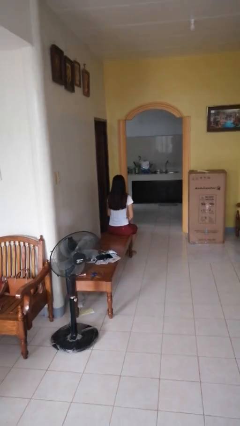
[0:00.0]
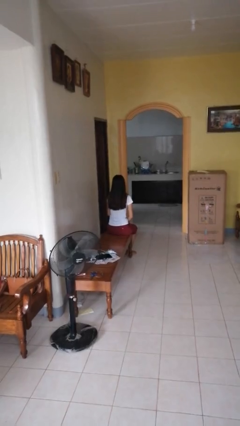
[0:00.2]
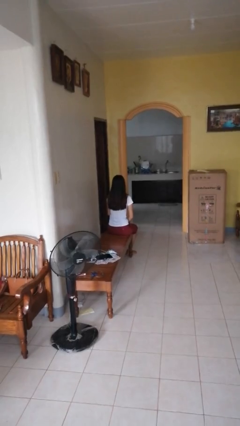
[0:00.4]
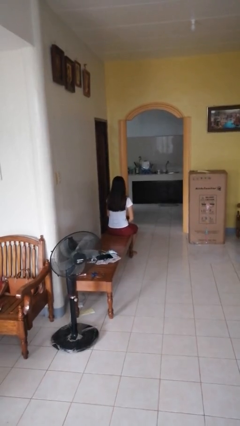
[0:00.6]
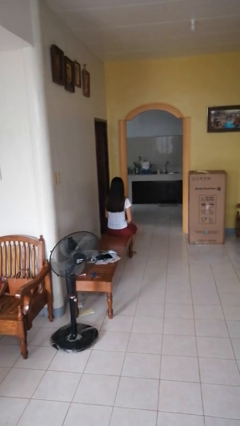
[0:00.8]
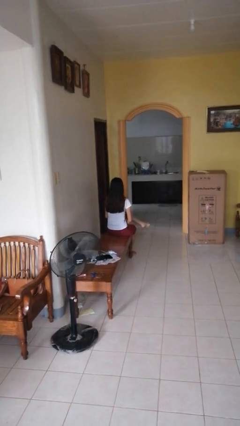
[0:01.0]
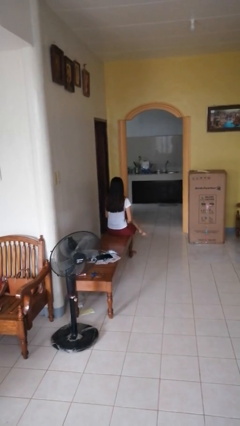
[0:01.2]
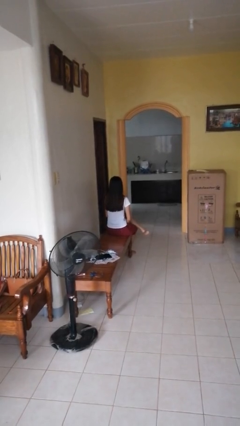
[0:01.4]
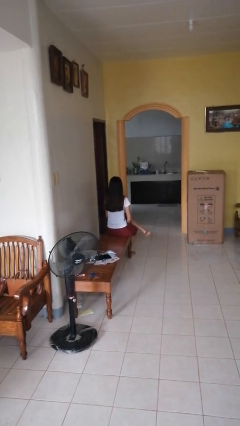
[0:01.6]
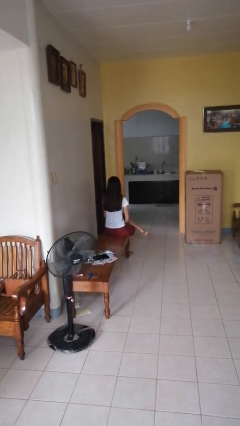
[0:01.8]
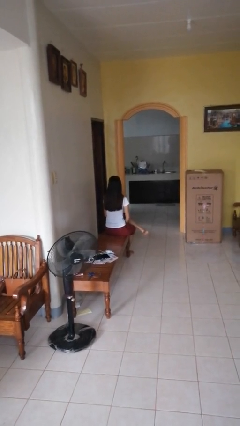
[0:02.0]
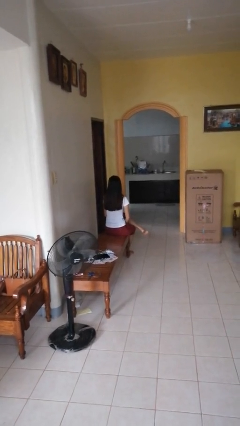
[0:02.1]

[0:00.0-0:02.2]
person crosses legs

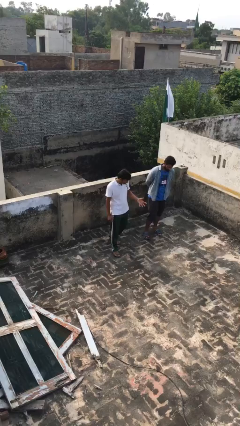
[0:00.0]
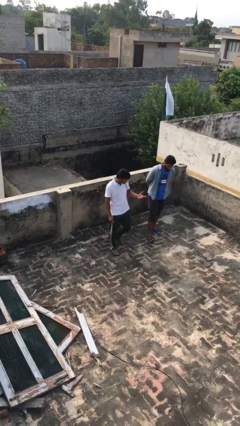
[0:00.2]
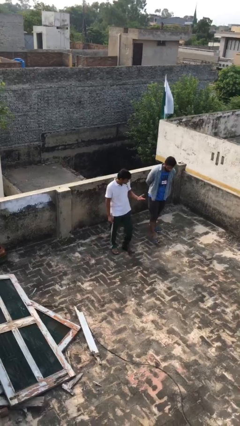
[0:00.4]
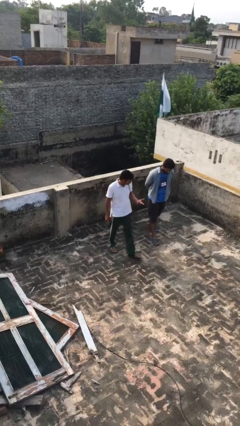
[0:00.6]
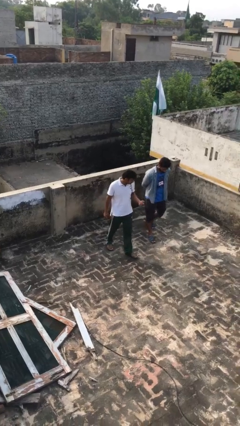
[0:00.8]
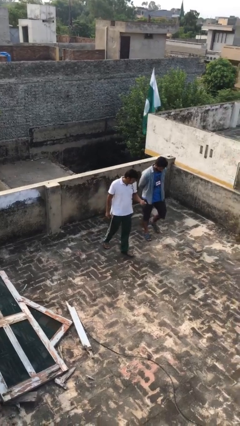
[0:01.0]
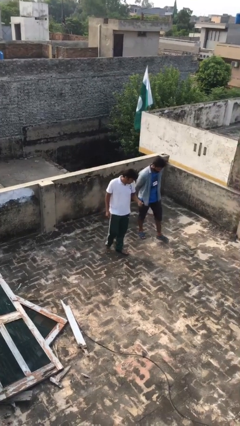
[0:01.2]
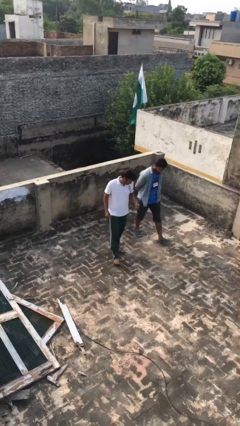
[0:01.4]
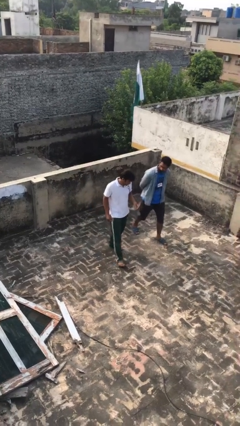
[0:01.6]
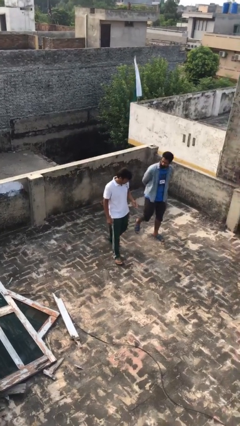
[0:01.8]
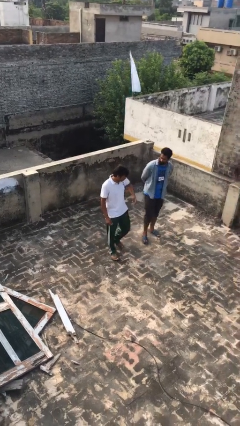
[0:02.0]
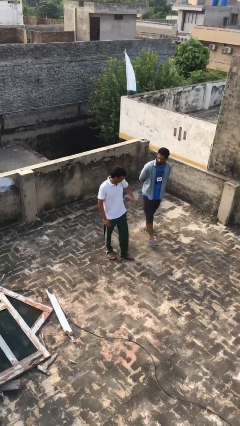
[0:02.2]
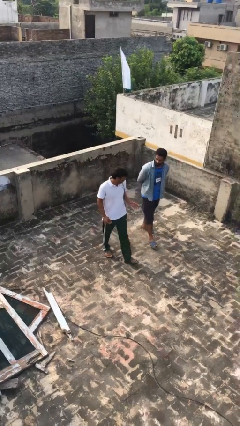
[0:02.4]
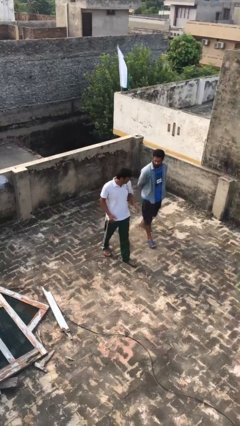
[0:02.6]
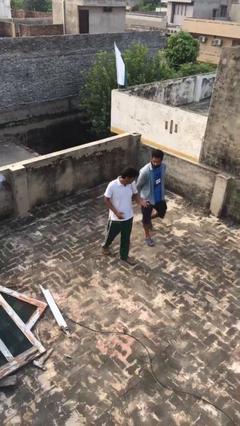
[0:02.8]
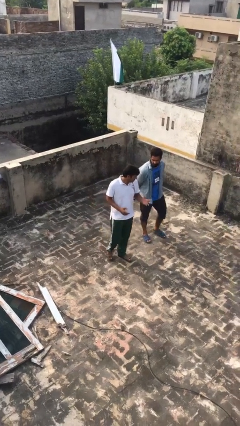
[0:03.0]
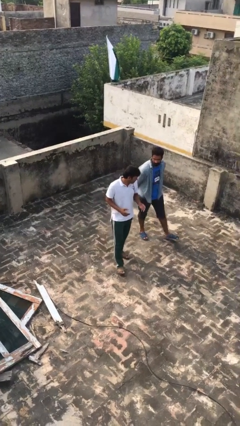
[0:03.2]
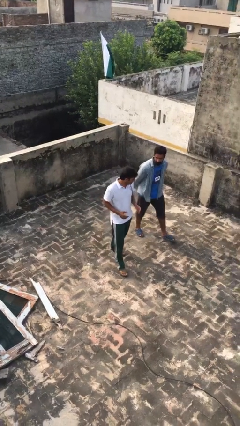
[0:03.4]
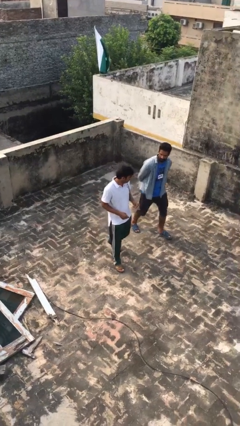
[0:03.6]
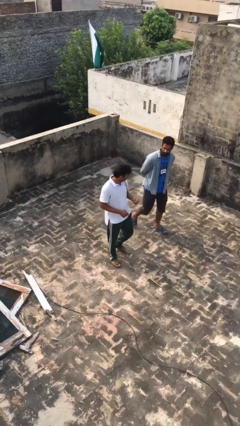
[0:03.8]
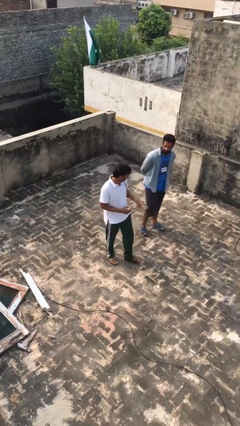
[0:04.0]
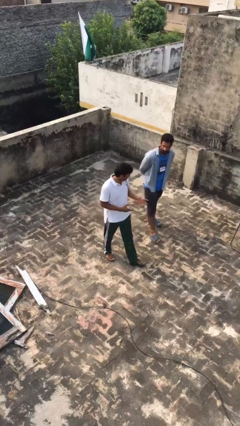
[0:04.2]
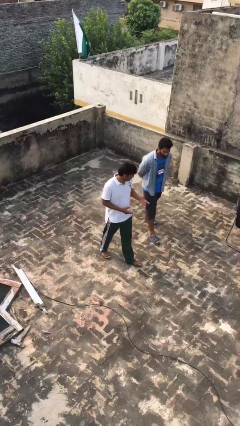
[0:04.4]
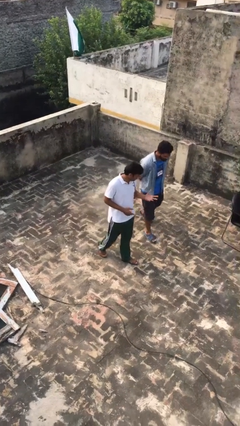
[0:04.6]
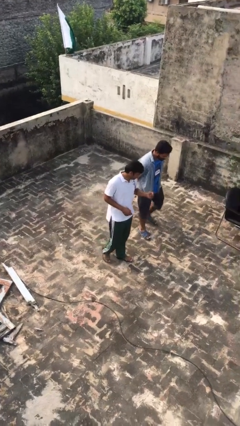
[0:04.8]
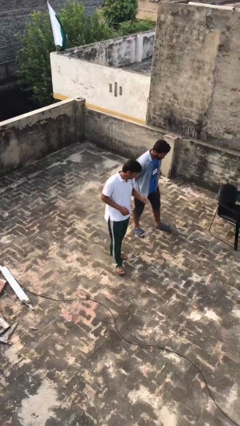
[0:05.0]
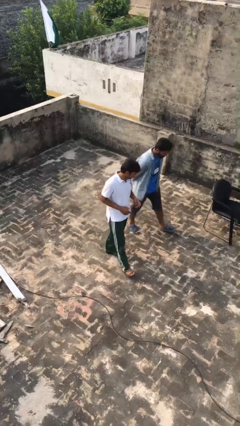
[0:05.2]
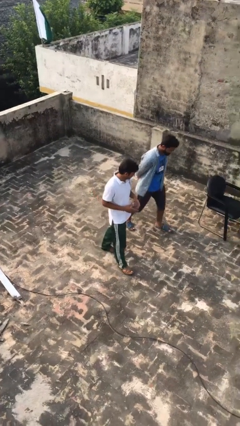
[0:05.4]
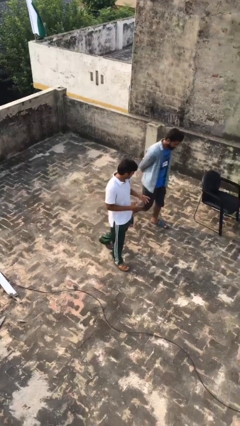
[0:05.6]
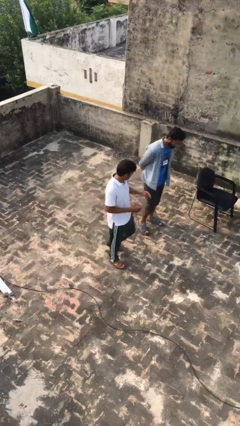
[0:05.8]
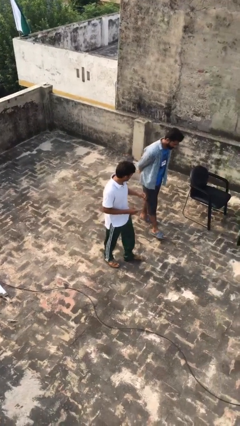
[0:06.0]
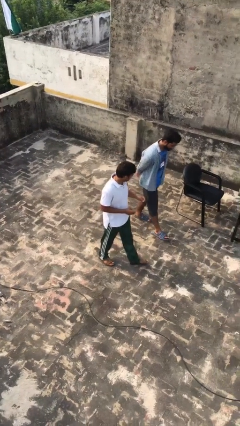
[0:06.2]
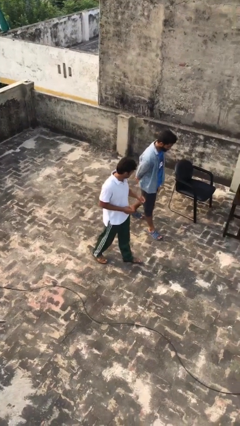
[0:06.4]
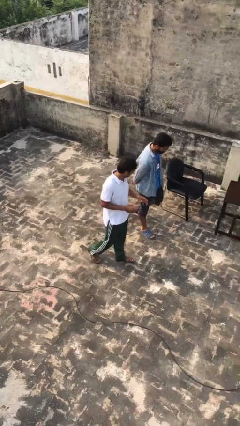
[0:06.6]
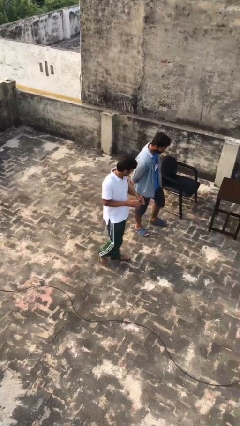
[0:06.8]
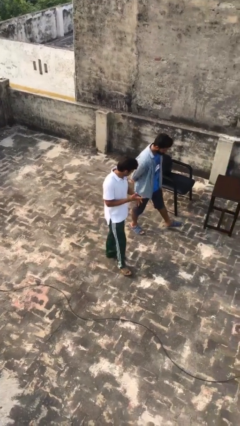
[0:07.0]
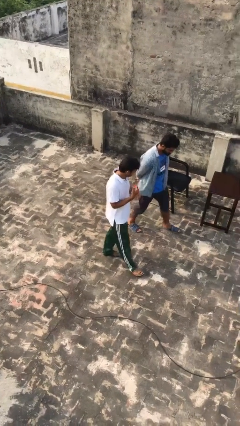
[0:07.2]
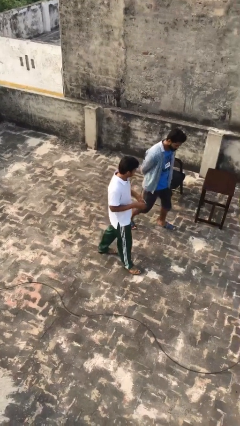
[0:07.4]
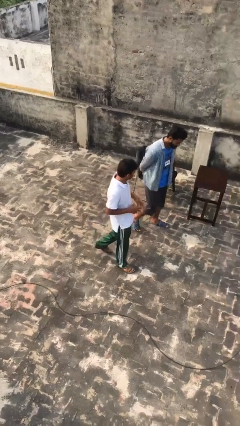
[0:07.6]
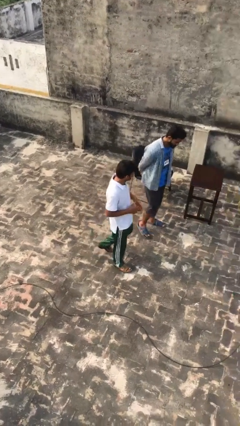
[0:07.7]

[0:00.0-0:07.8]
person talks to person

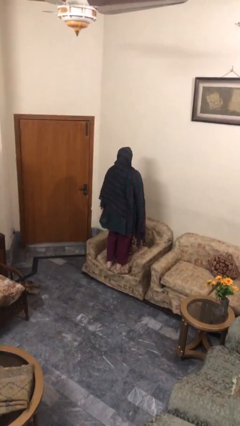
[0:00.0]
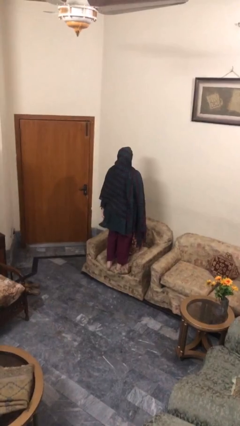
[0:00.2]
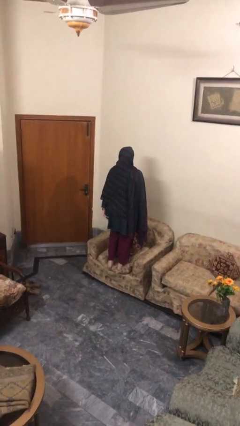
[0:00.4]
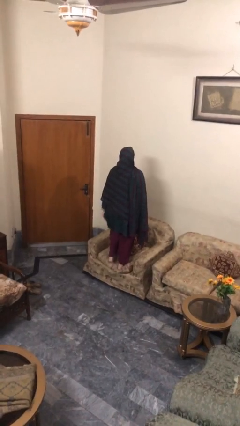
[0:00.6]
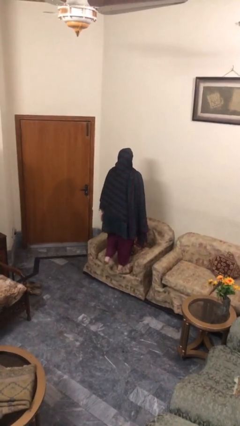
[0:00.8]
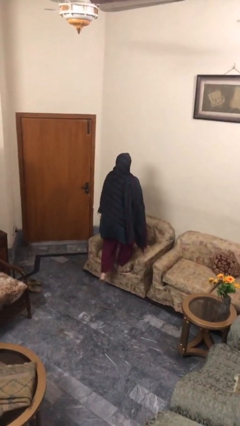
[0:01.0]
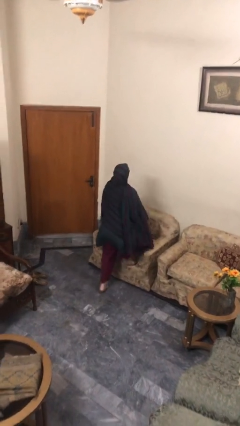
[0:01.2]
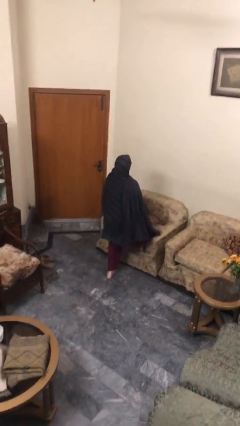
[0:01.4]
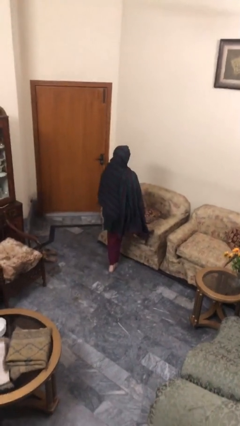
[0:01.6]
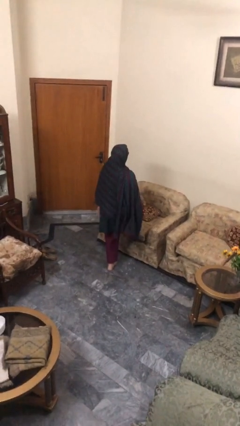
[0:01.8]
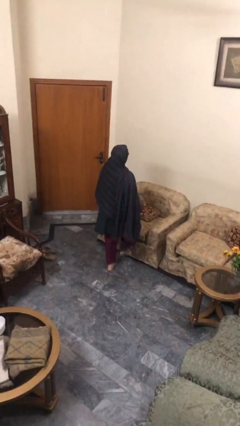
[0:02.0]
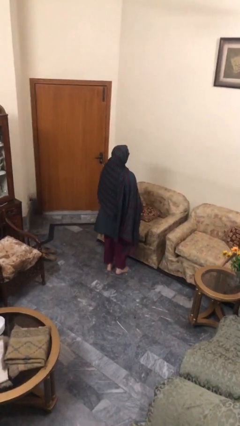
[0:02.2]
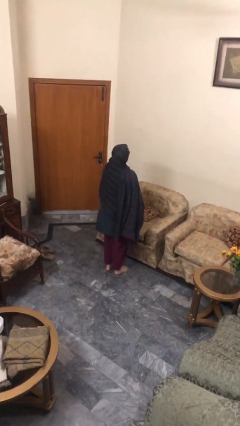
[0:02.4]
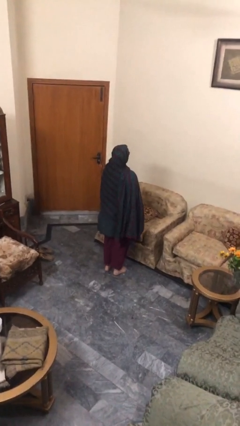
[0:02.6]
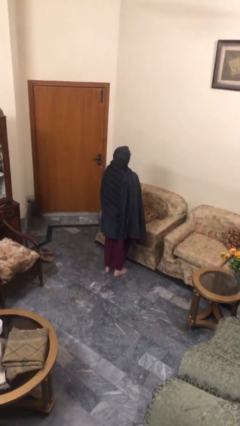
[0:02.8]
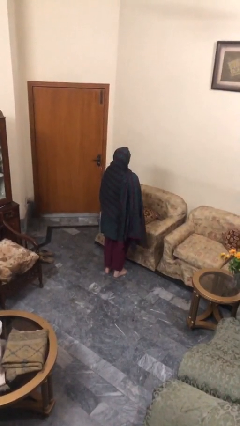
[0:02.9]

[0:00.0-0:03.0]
person climbs off couch

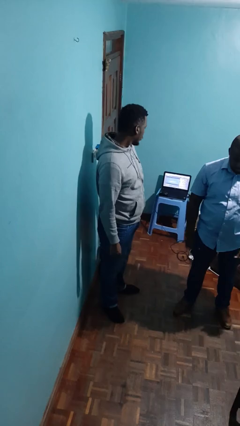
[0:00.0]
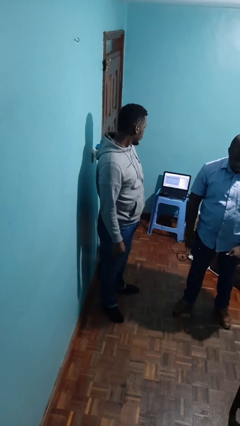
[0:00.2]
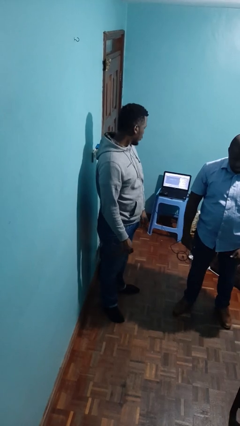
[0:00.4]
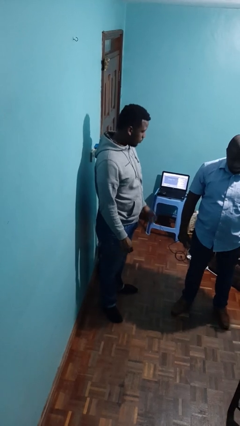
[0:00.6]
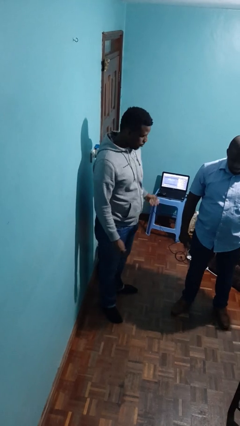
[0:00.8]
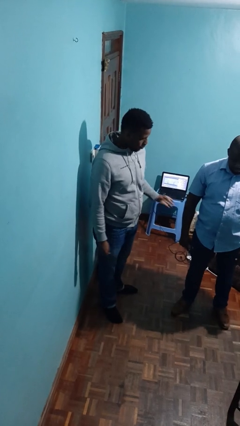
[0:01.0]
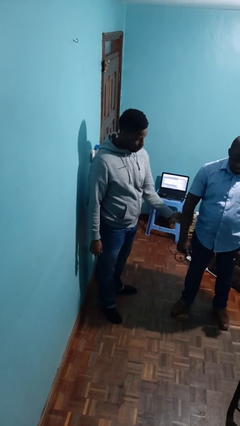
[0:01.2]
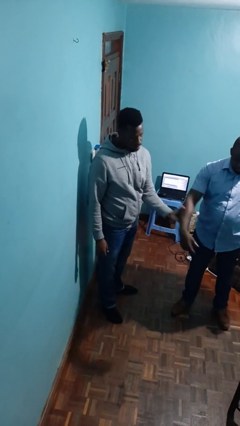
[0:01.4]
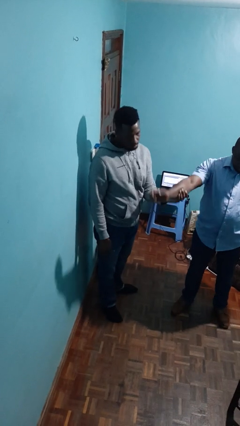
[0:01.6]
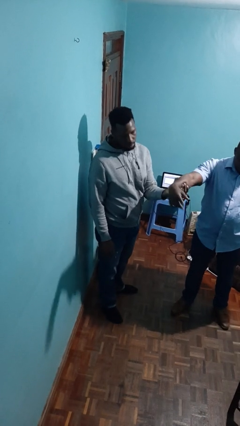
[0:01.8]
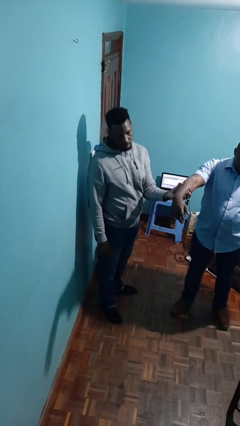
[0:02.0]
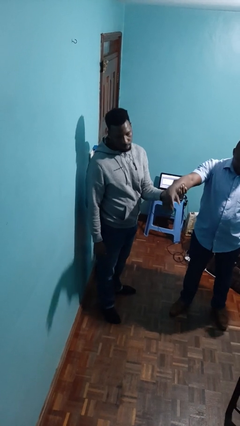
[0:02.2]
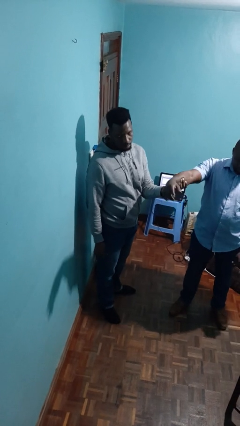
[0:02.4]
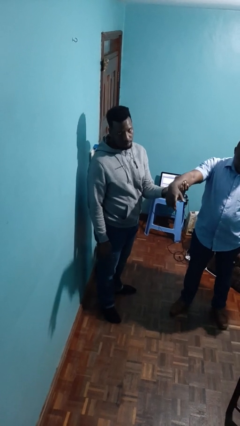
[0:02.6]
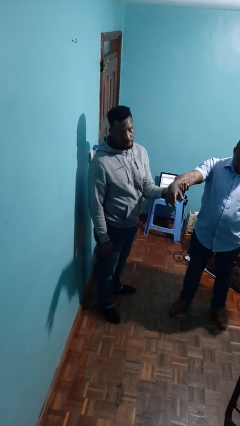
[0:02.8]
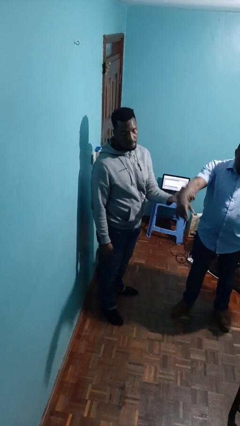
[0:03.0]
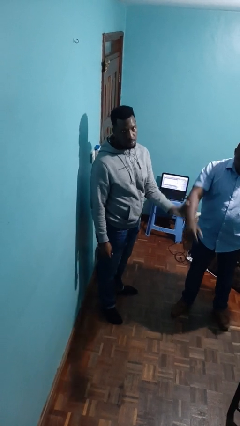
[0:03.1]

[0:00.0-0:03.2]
person grabs person by forearm

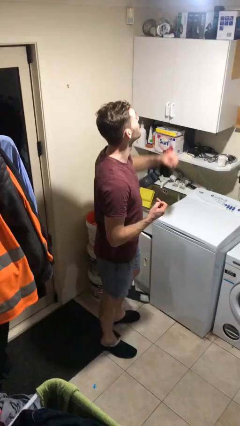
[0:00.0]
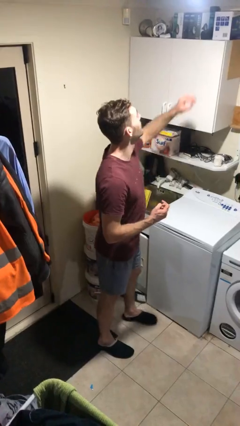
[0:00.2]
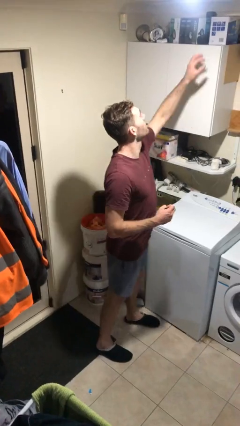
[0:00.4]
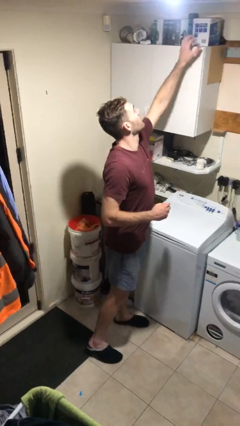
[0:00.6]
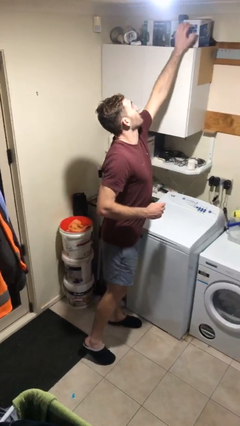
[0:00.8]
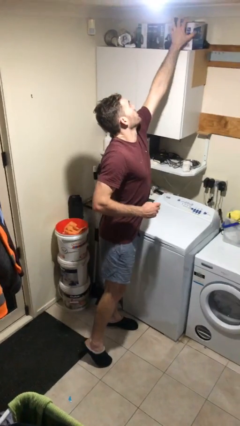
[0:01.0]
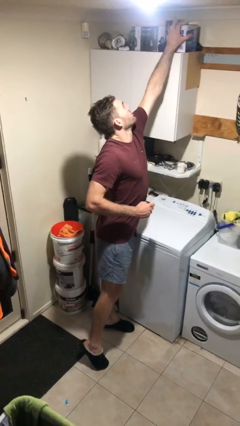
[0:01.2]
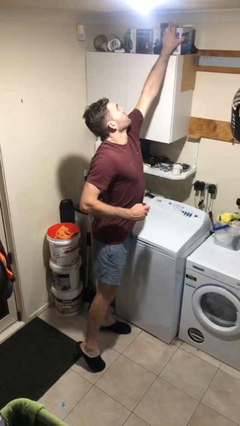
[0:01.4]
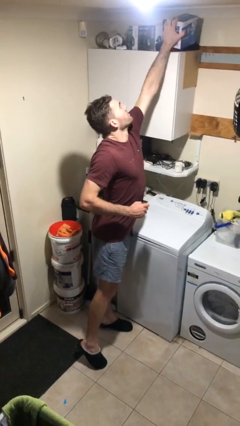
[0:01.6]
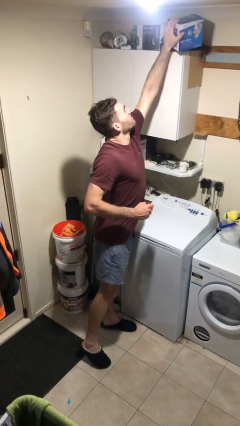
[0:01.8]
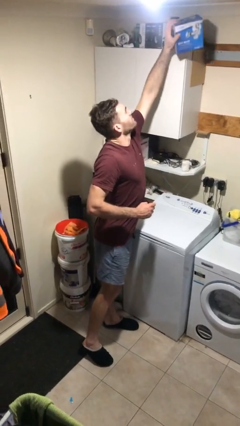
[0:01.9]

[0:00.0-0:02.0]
person picks up object from shelf
